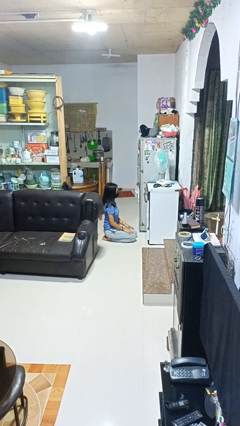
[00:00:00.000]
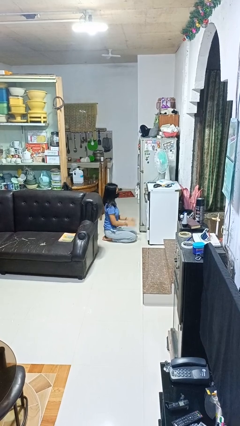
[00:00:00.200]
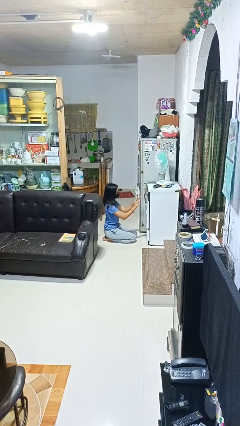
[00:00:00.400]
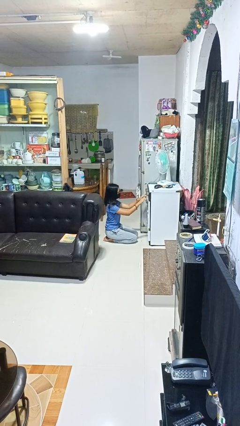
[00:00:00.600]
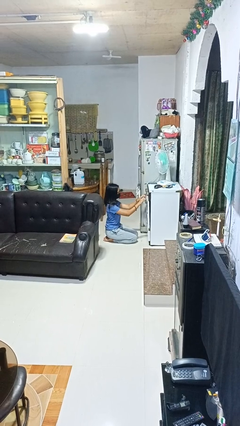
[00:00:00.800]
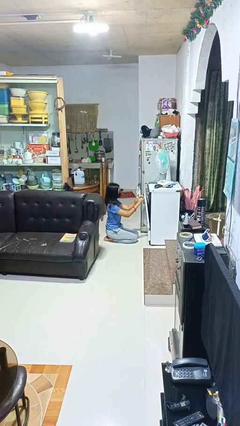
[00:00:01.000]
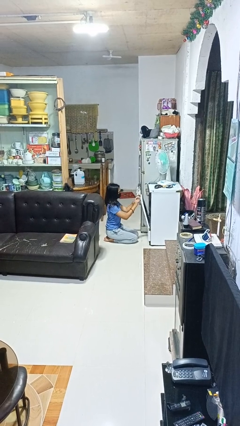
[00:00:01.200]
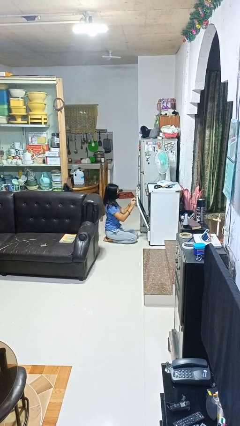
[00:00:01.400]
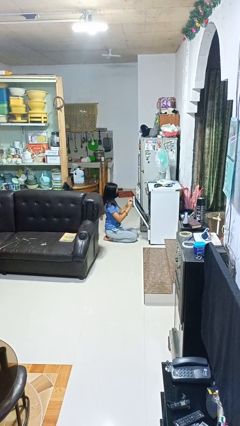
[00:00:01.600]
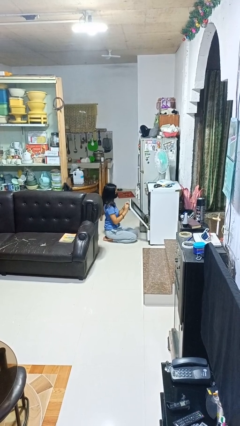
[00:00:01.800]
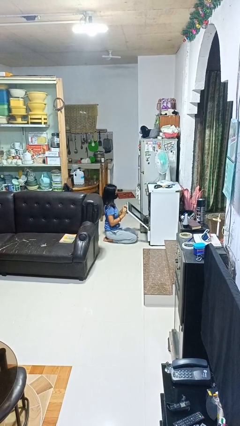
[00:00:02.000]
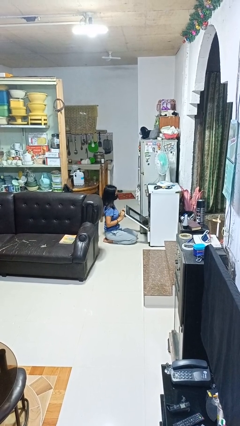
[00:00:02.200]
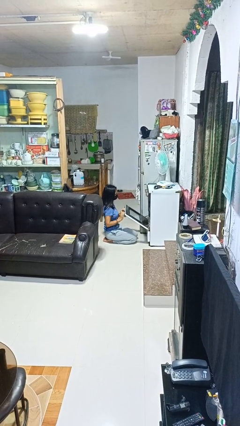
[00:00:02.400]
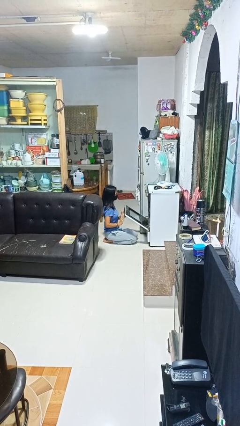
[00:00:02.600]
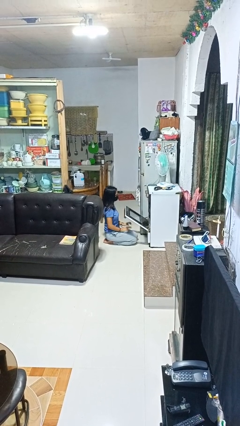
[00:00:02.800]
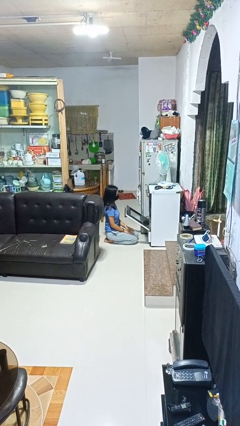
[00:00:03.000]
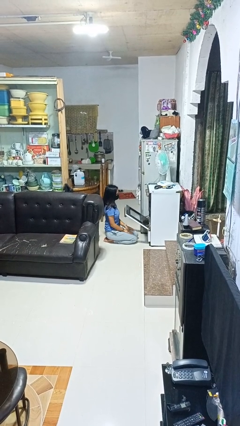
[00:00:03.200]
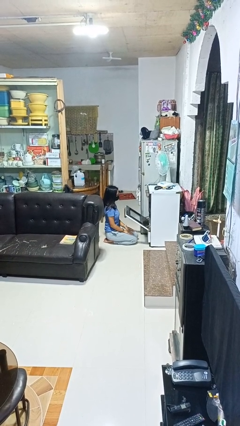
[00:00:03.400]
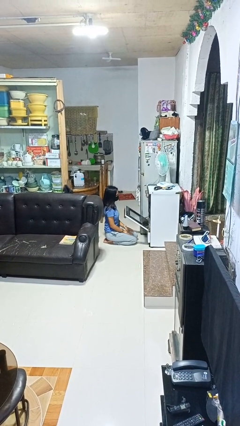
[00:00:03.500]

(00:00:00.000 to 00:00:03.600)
person opens oven door

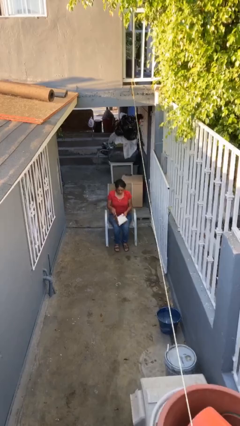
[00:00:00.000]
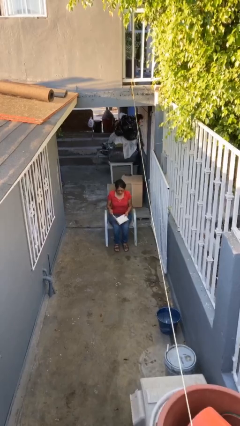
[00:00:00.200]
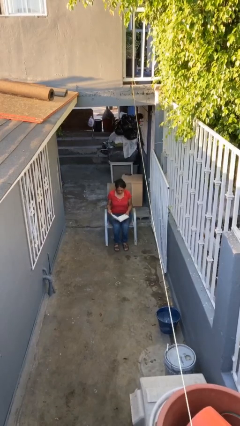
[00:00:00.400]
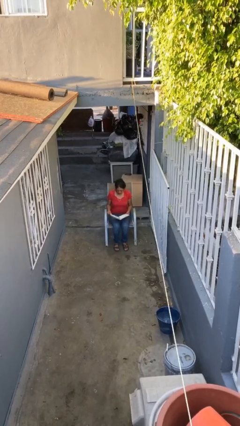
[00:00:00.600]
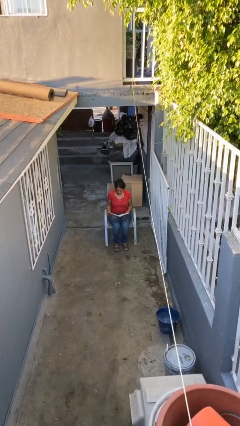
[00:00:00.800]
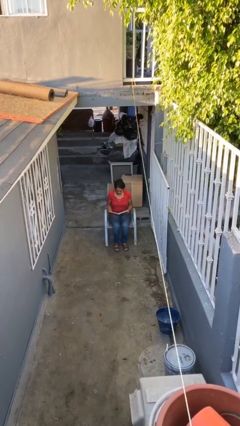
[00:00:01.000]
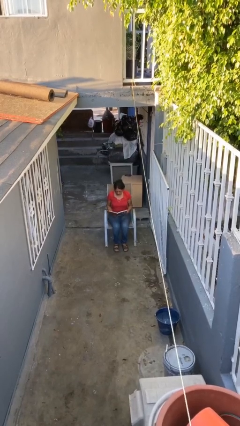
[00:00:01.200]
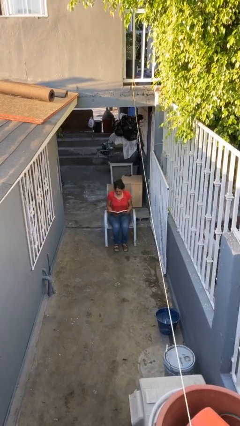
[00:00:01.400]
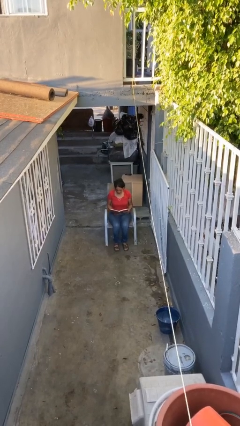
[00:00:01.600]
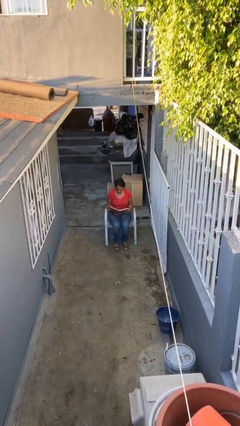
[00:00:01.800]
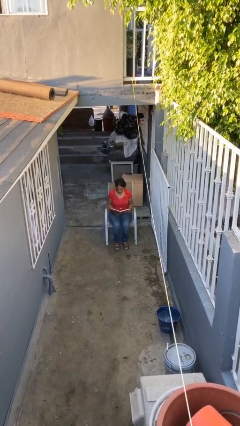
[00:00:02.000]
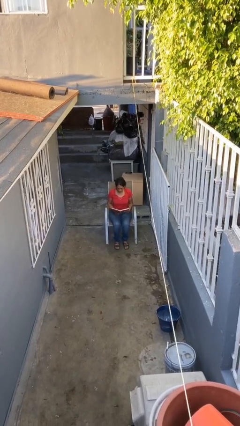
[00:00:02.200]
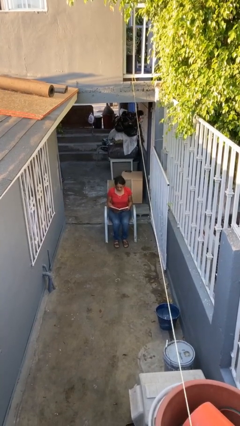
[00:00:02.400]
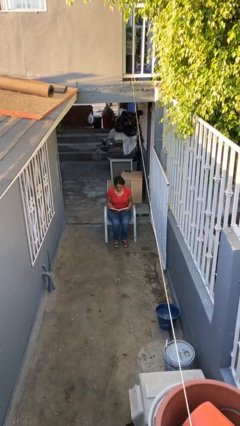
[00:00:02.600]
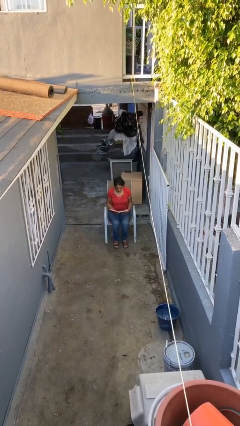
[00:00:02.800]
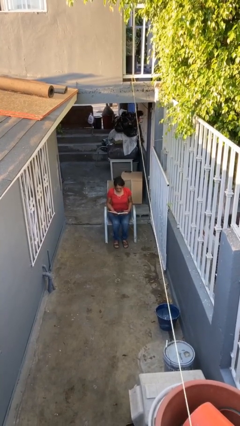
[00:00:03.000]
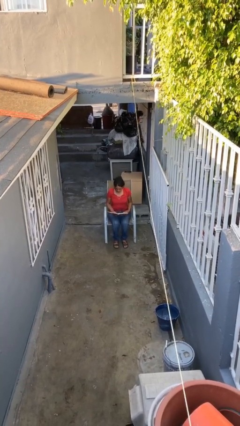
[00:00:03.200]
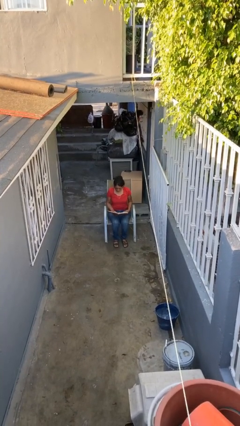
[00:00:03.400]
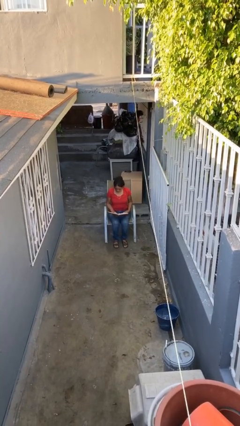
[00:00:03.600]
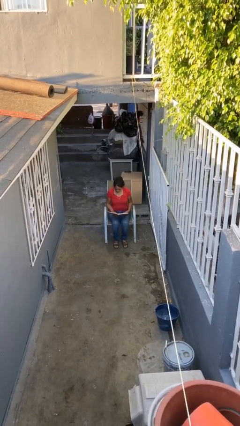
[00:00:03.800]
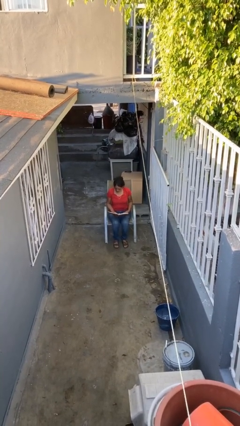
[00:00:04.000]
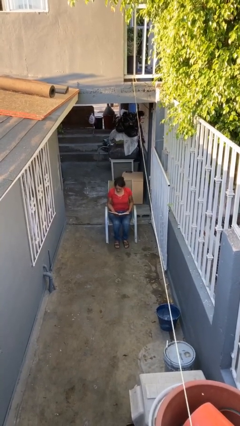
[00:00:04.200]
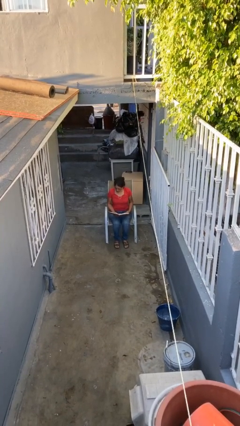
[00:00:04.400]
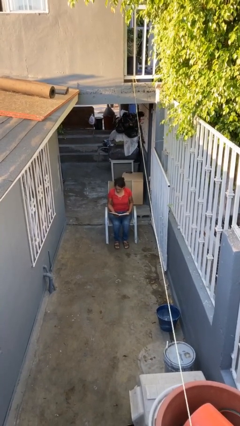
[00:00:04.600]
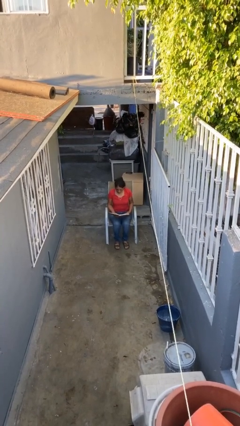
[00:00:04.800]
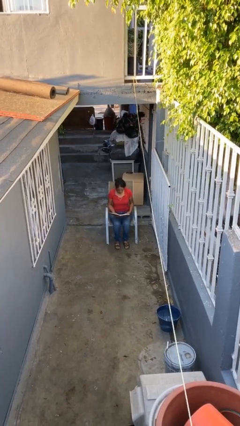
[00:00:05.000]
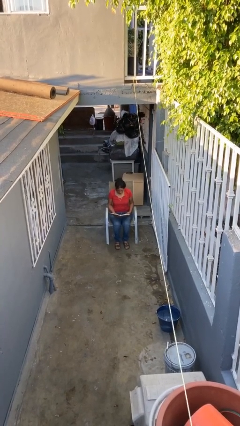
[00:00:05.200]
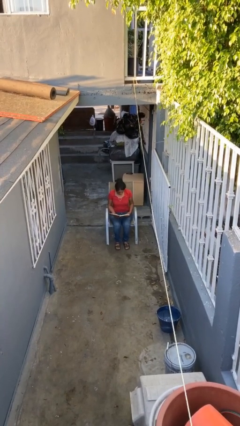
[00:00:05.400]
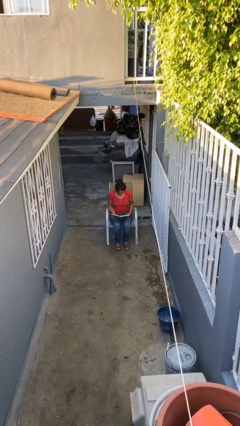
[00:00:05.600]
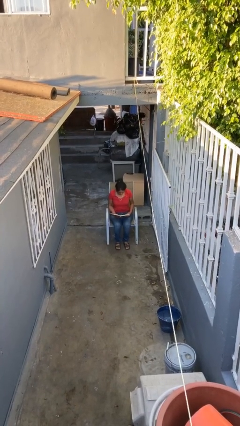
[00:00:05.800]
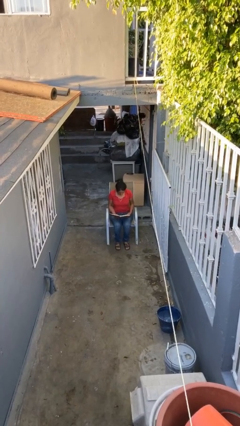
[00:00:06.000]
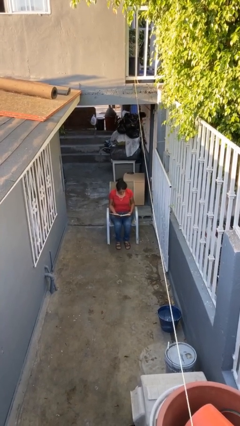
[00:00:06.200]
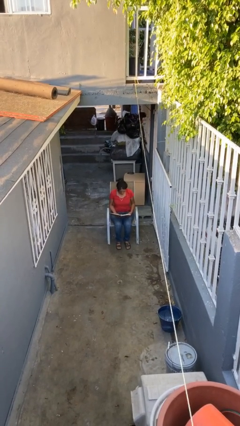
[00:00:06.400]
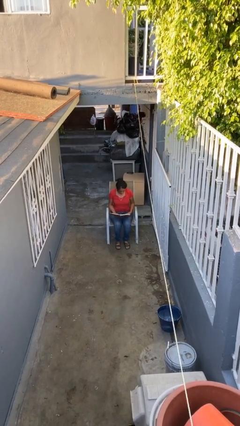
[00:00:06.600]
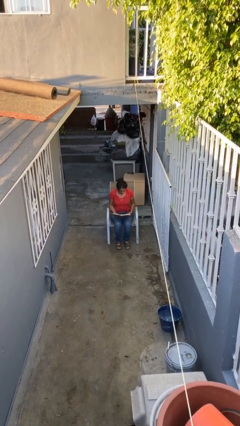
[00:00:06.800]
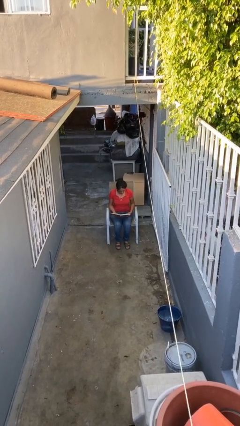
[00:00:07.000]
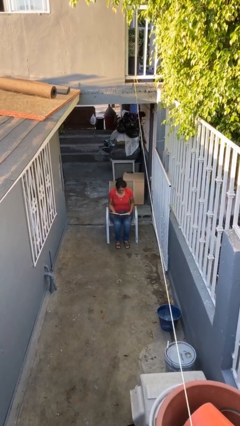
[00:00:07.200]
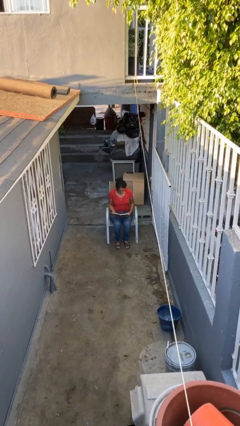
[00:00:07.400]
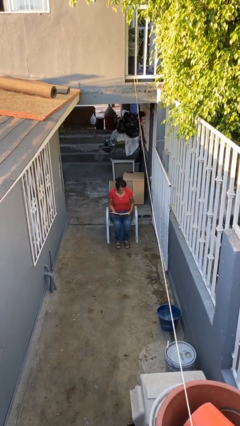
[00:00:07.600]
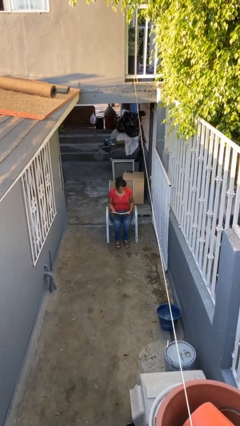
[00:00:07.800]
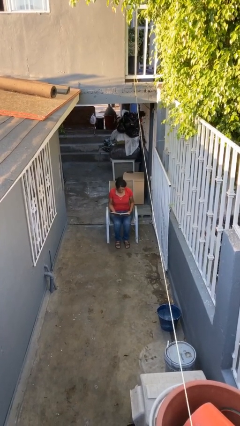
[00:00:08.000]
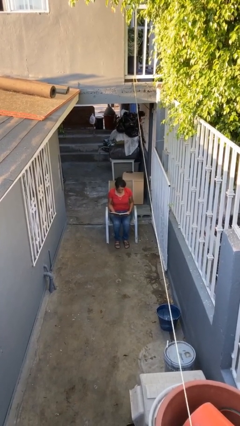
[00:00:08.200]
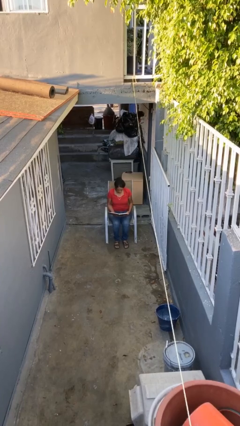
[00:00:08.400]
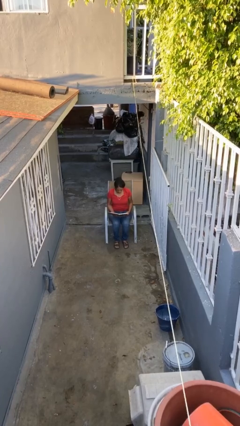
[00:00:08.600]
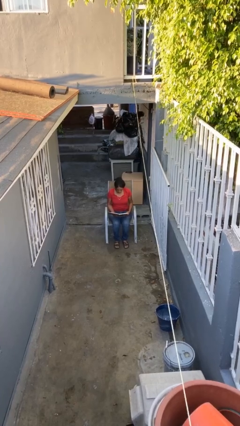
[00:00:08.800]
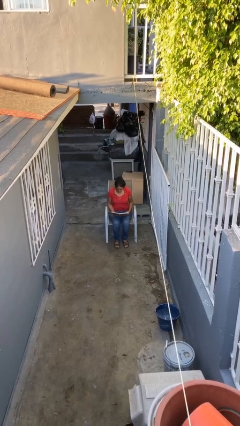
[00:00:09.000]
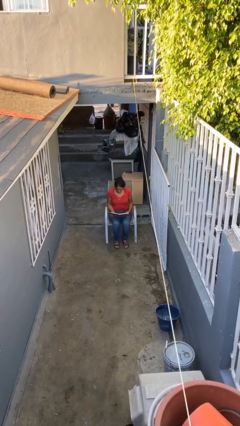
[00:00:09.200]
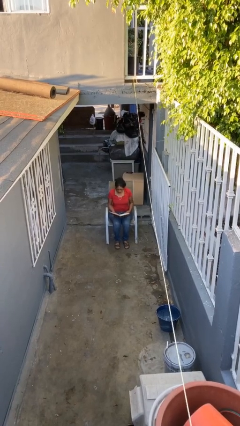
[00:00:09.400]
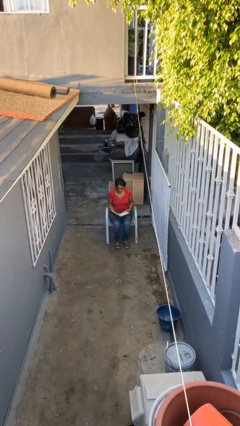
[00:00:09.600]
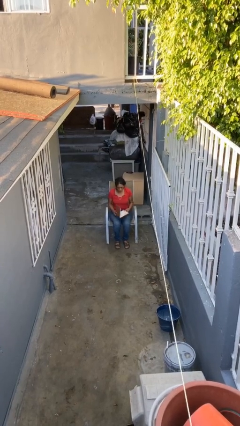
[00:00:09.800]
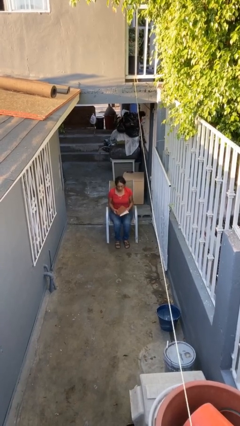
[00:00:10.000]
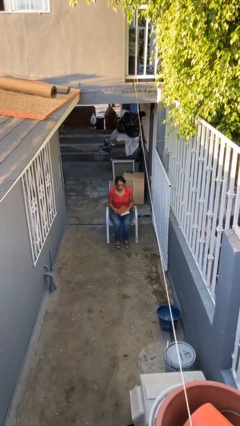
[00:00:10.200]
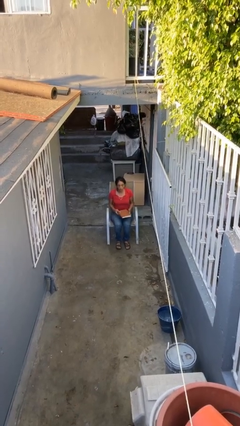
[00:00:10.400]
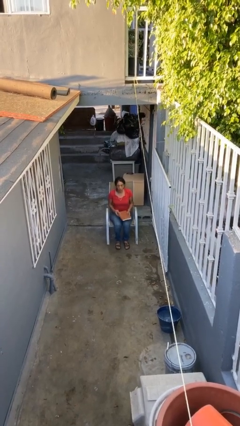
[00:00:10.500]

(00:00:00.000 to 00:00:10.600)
person reads document

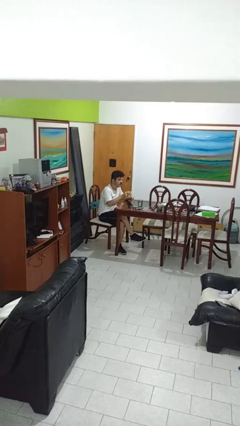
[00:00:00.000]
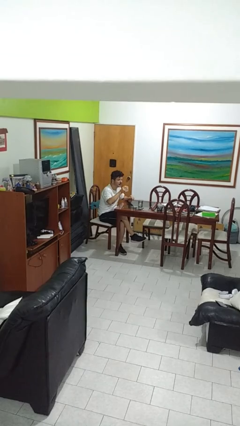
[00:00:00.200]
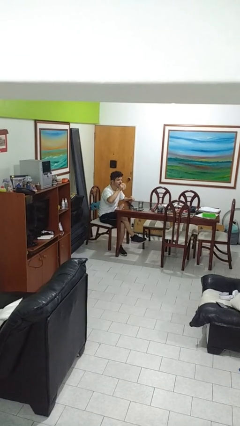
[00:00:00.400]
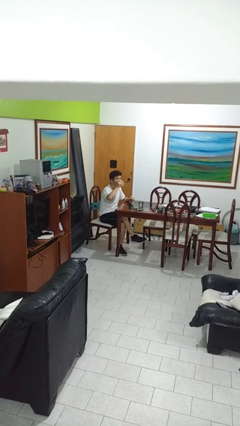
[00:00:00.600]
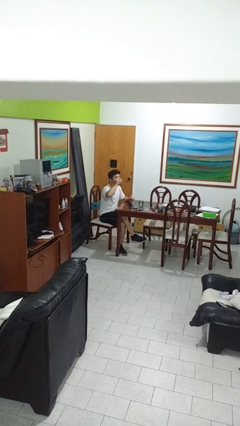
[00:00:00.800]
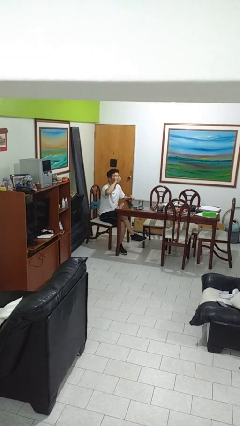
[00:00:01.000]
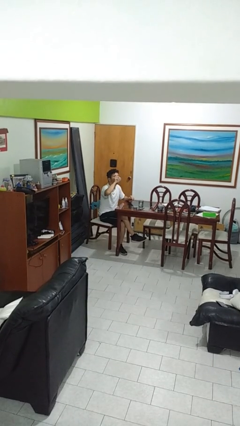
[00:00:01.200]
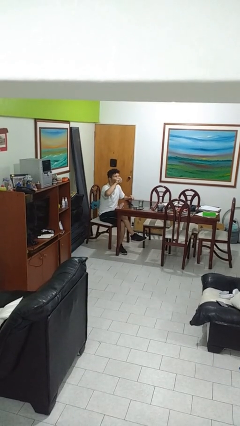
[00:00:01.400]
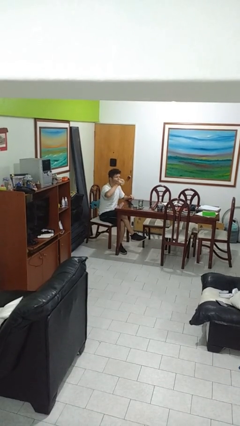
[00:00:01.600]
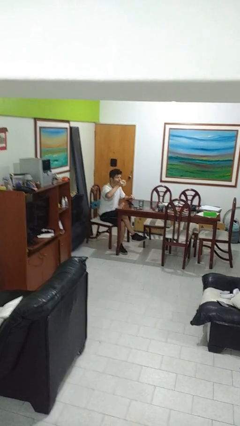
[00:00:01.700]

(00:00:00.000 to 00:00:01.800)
person drinks from shotglass

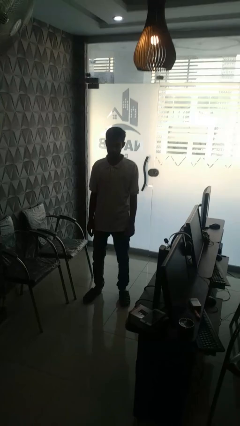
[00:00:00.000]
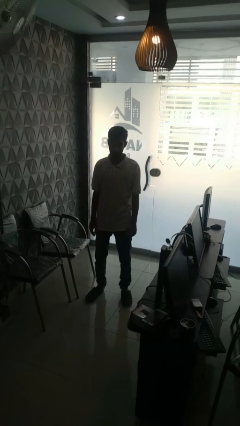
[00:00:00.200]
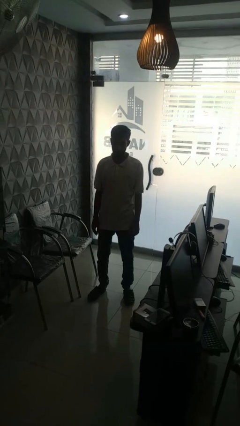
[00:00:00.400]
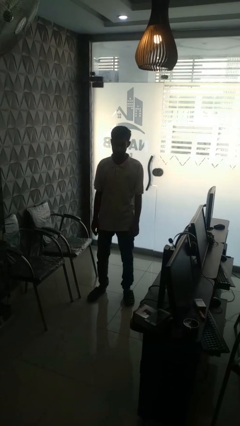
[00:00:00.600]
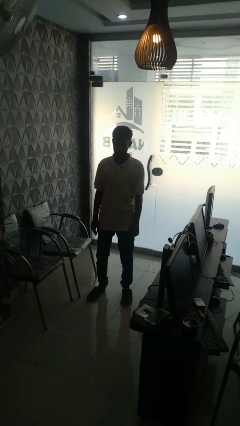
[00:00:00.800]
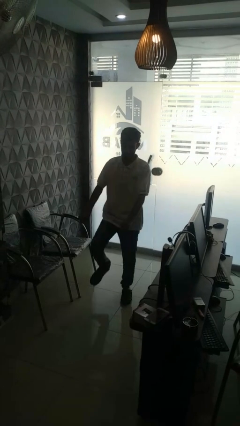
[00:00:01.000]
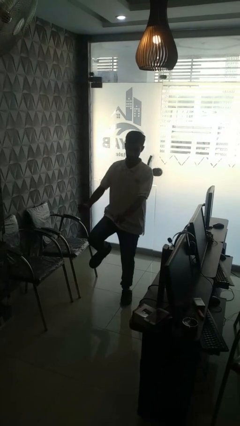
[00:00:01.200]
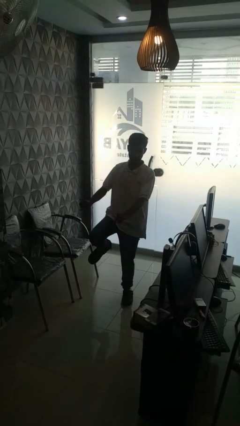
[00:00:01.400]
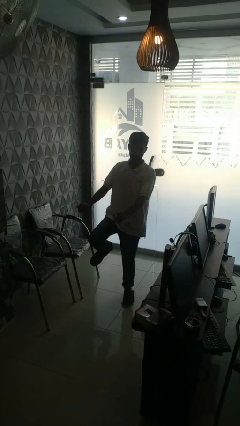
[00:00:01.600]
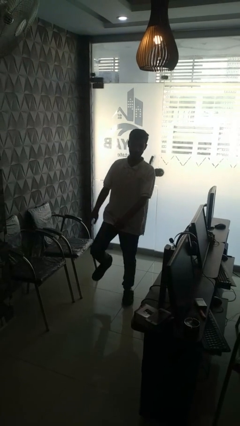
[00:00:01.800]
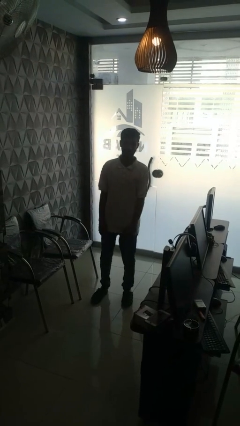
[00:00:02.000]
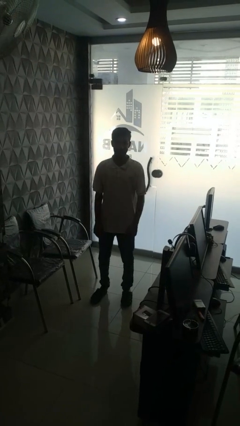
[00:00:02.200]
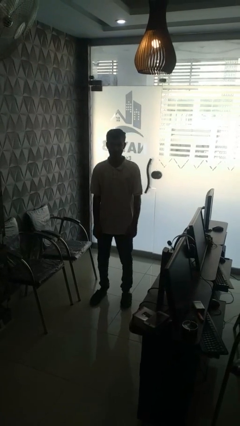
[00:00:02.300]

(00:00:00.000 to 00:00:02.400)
person dances in place
